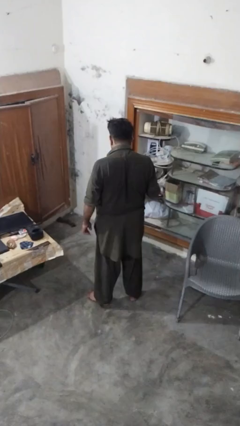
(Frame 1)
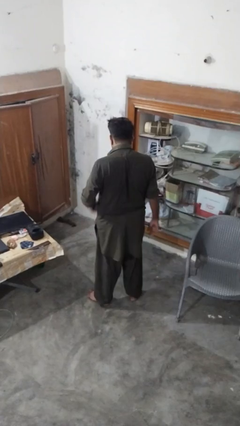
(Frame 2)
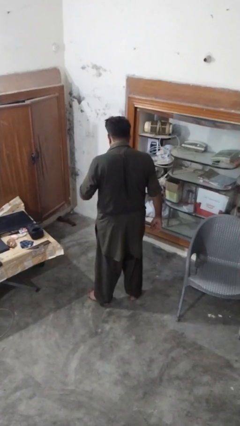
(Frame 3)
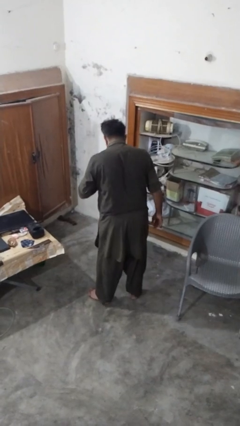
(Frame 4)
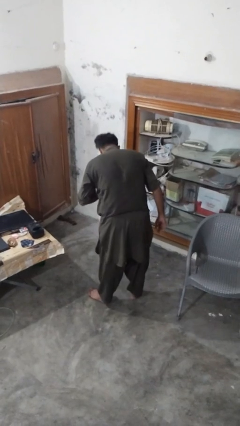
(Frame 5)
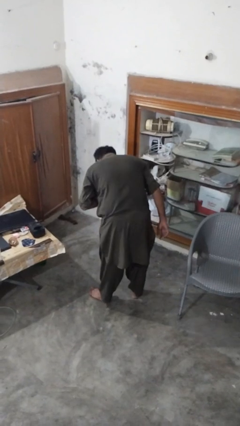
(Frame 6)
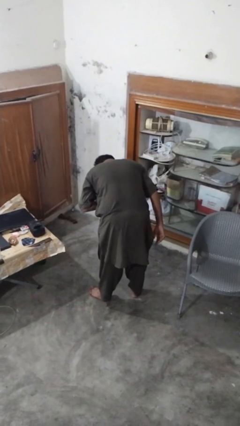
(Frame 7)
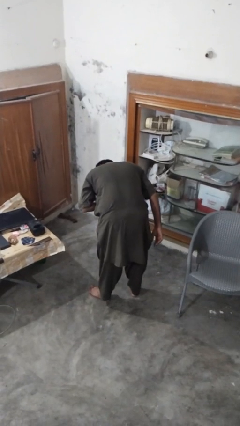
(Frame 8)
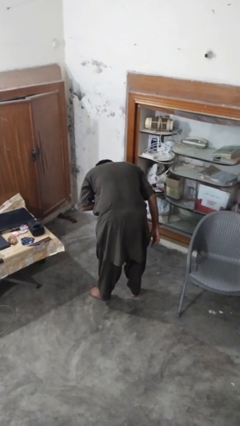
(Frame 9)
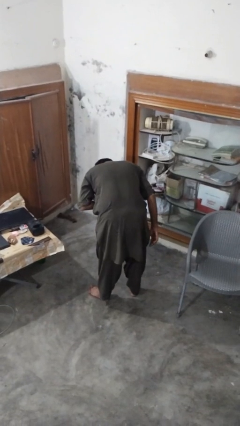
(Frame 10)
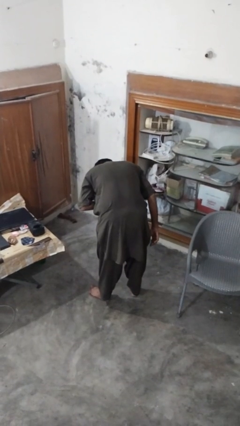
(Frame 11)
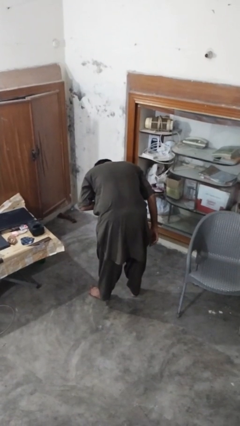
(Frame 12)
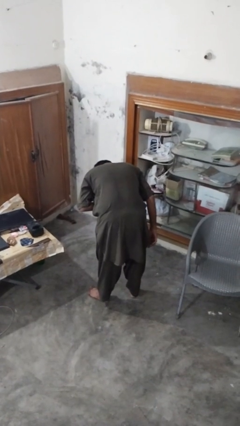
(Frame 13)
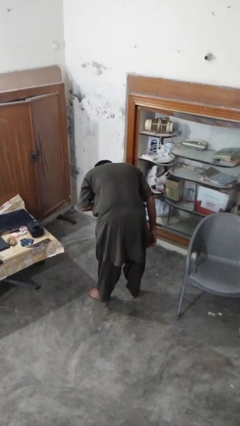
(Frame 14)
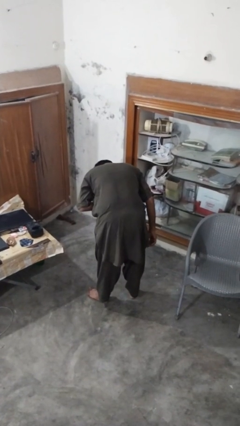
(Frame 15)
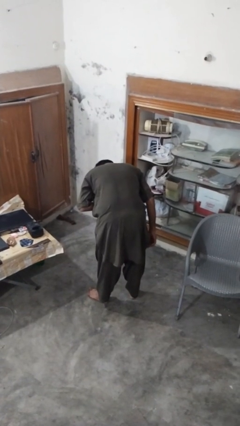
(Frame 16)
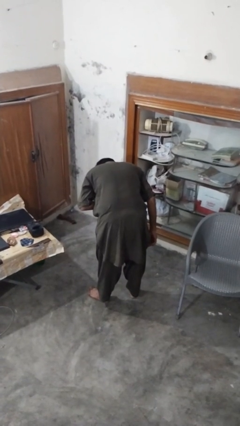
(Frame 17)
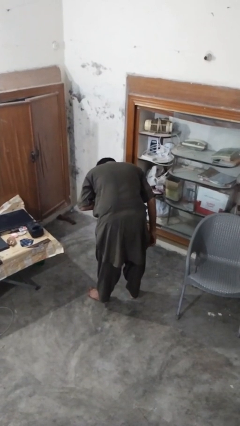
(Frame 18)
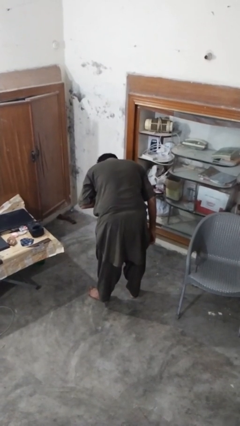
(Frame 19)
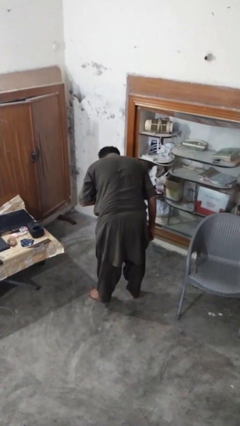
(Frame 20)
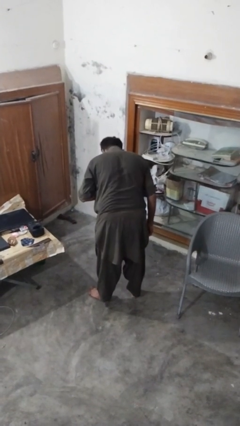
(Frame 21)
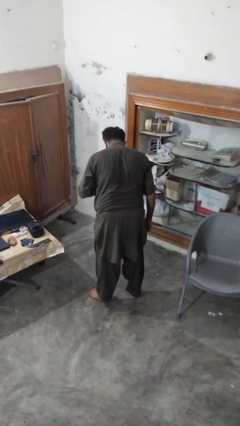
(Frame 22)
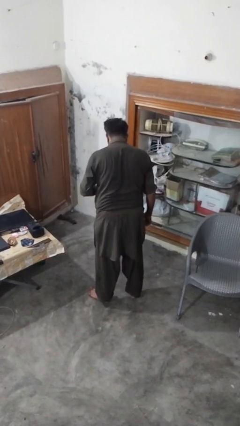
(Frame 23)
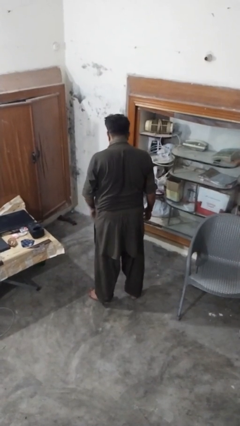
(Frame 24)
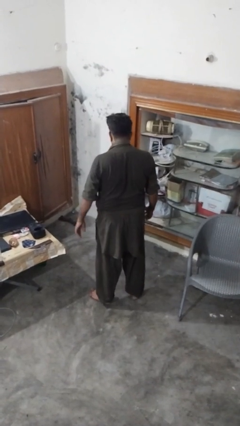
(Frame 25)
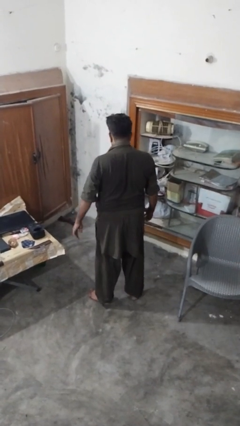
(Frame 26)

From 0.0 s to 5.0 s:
person bows

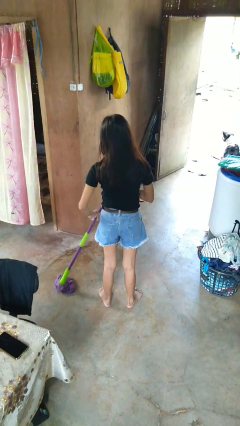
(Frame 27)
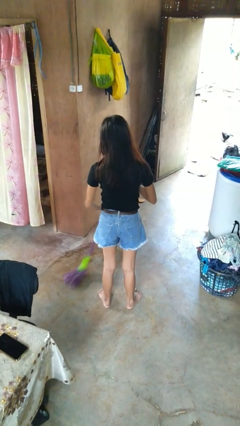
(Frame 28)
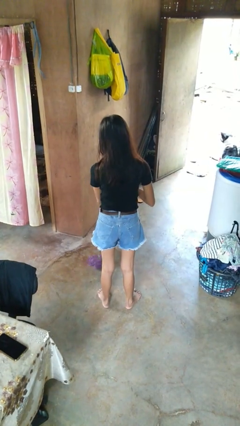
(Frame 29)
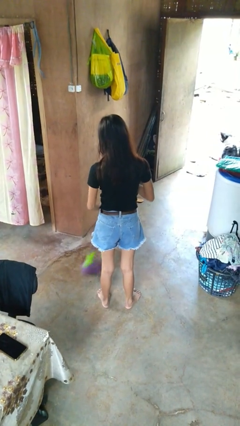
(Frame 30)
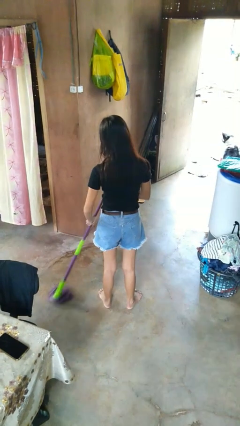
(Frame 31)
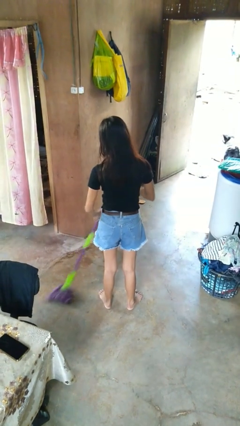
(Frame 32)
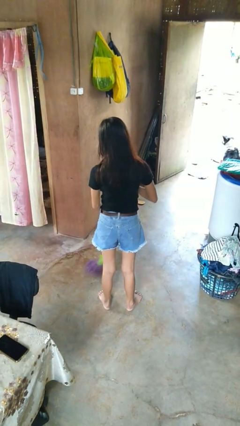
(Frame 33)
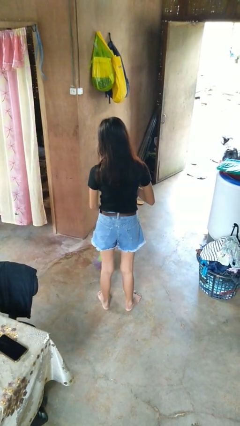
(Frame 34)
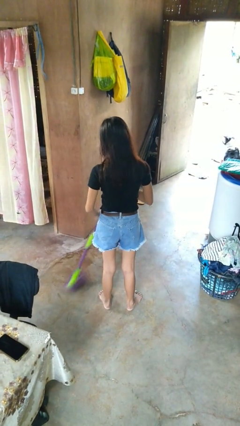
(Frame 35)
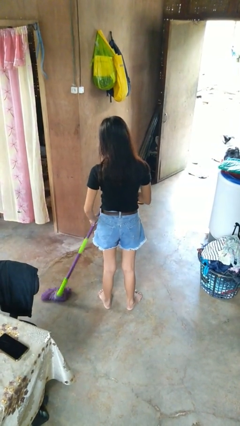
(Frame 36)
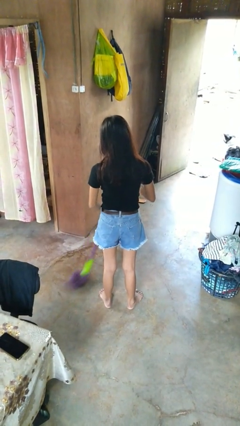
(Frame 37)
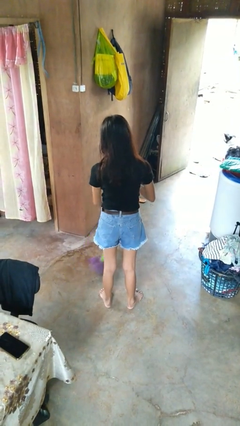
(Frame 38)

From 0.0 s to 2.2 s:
person mops

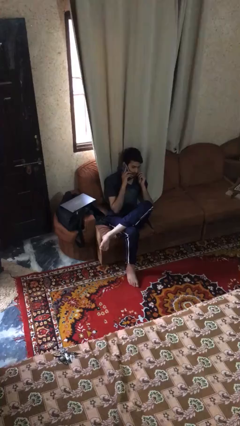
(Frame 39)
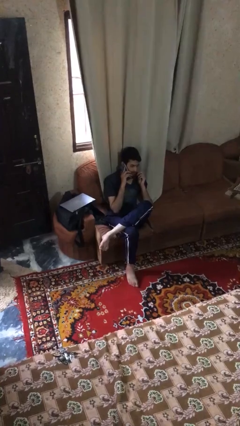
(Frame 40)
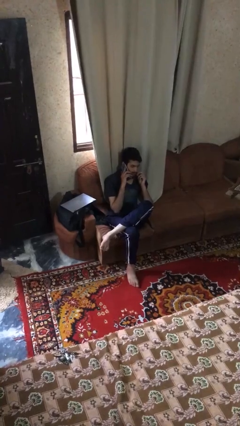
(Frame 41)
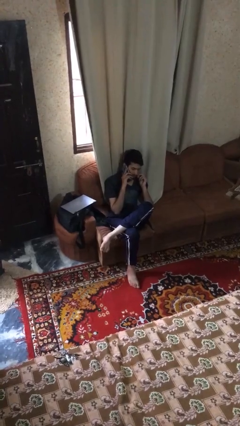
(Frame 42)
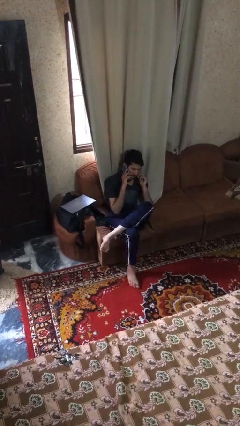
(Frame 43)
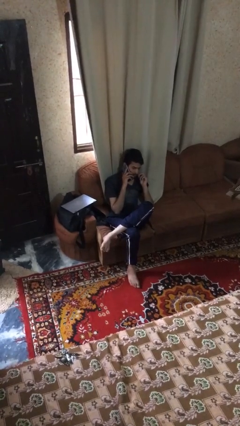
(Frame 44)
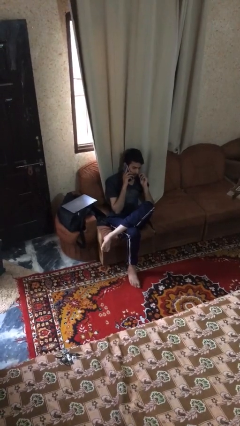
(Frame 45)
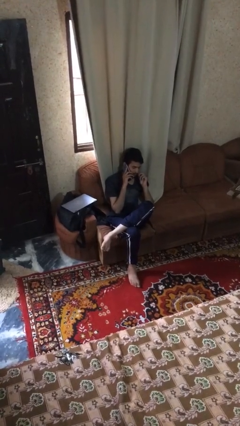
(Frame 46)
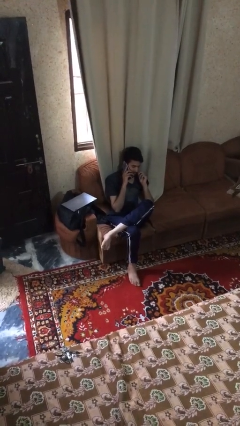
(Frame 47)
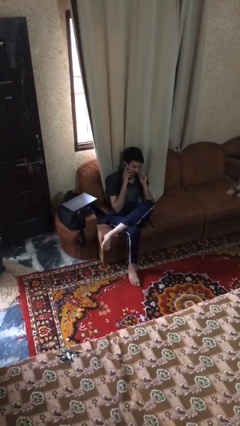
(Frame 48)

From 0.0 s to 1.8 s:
person talks on phone

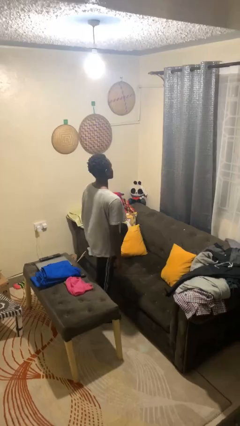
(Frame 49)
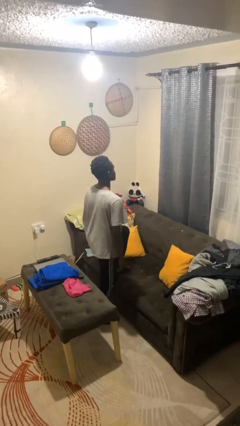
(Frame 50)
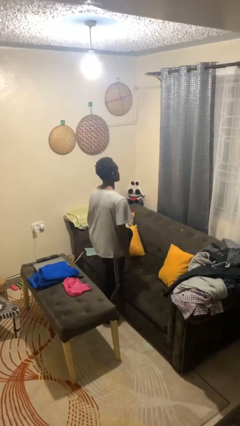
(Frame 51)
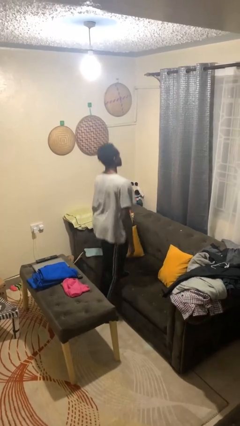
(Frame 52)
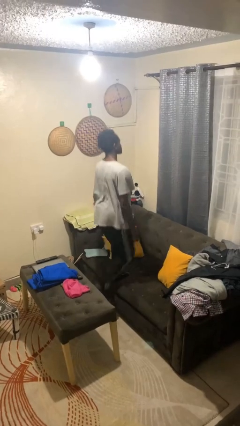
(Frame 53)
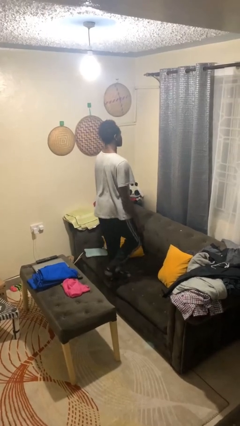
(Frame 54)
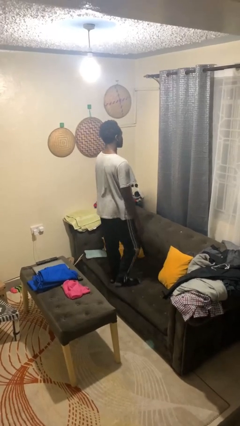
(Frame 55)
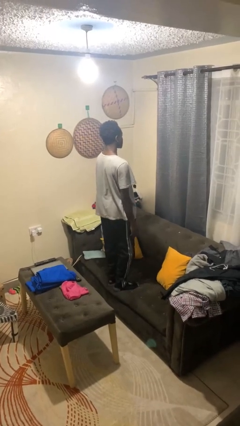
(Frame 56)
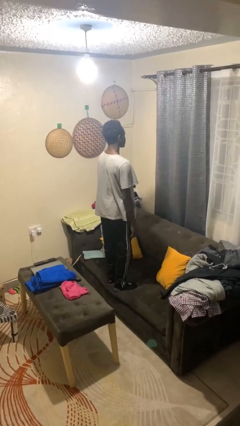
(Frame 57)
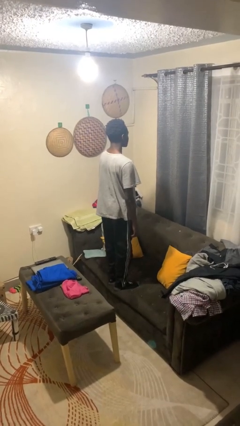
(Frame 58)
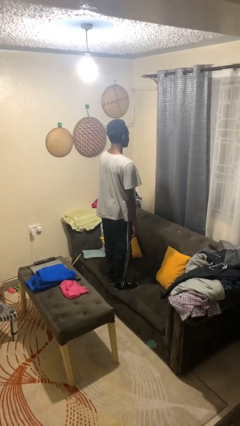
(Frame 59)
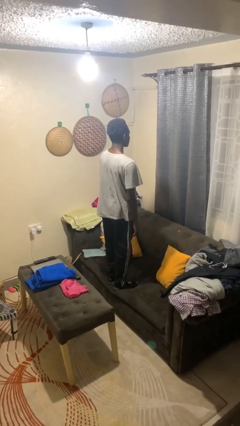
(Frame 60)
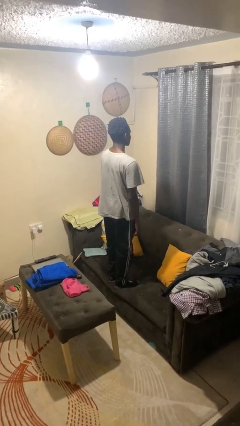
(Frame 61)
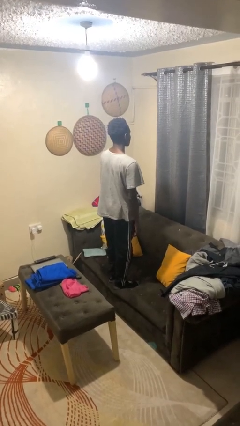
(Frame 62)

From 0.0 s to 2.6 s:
person jumps on couch

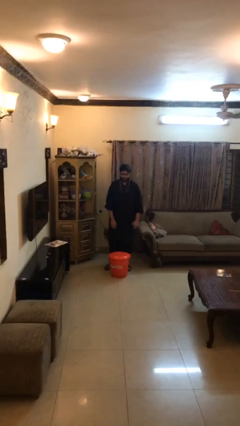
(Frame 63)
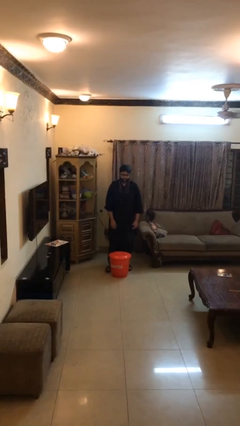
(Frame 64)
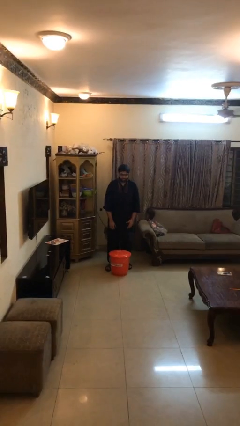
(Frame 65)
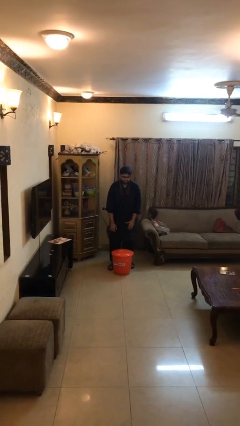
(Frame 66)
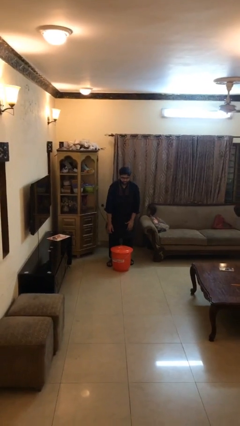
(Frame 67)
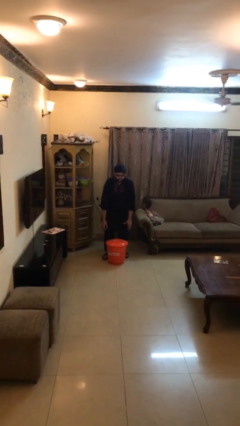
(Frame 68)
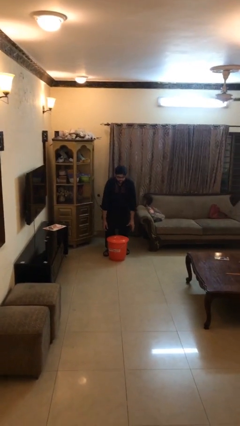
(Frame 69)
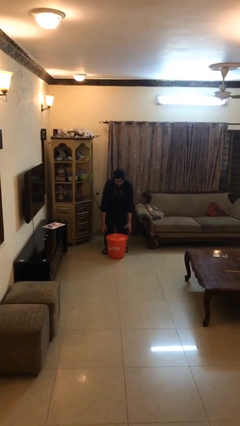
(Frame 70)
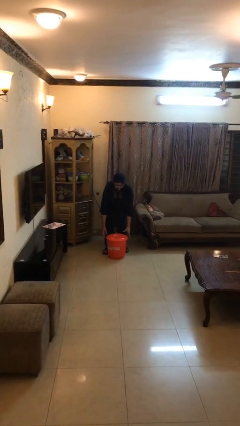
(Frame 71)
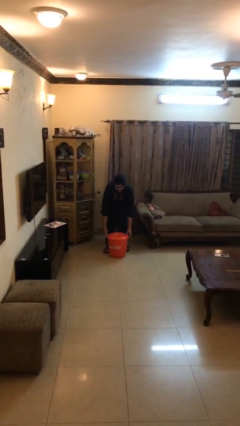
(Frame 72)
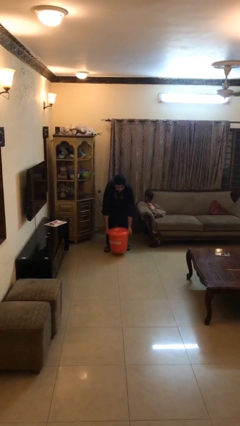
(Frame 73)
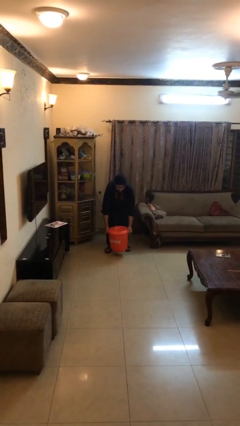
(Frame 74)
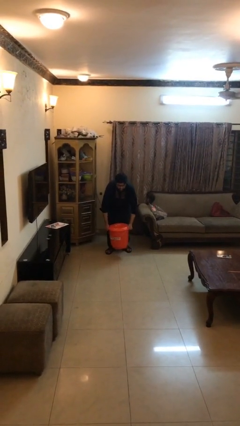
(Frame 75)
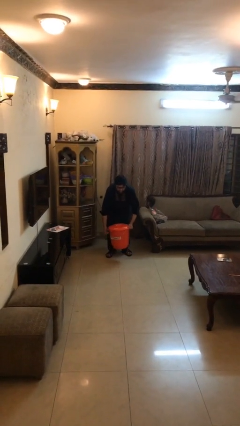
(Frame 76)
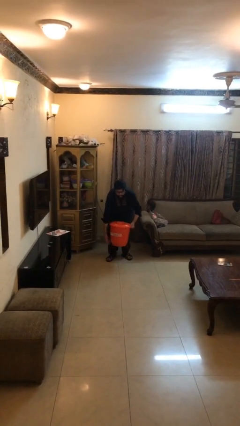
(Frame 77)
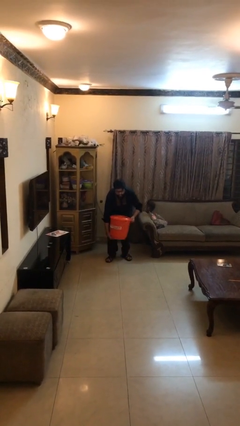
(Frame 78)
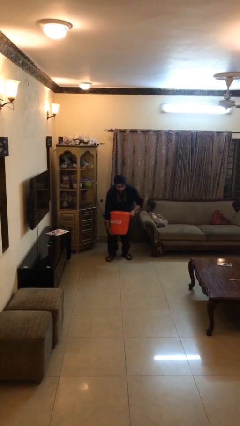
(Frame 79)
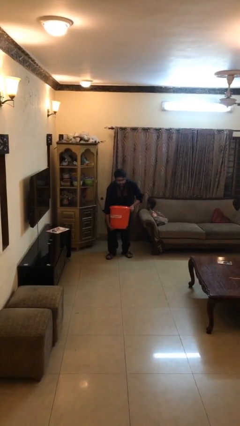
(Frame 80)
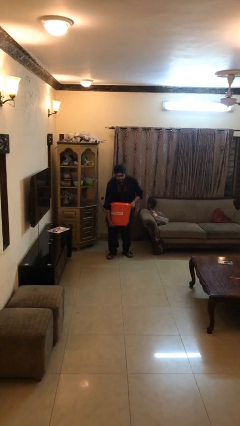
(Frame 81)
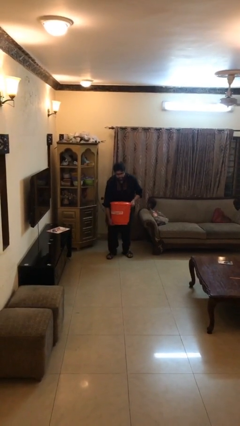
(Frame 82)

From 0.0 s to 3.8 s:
person picks up object from floor

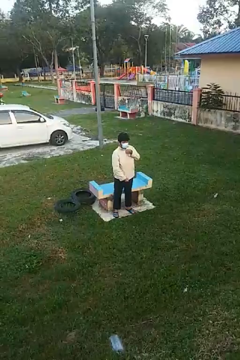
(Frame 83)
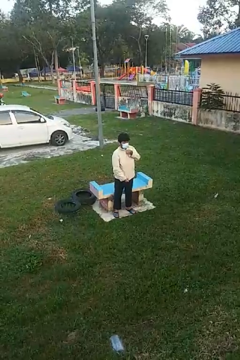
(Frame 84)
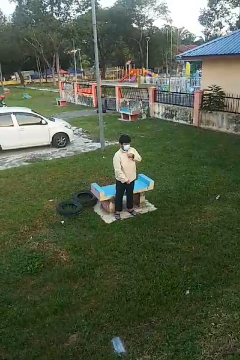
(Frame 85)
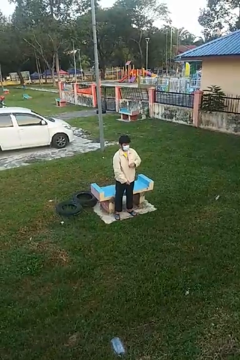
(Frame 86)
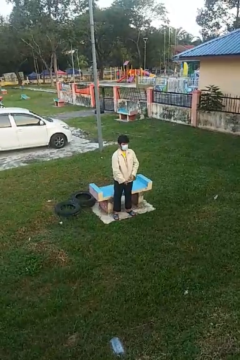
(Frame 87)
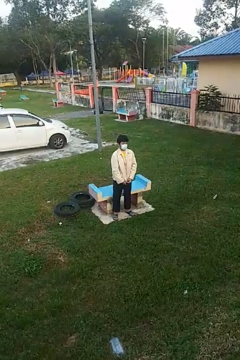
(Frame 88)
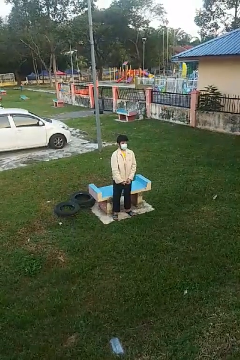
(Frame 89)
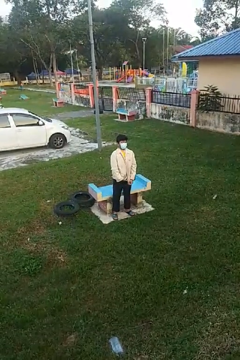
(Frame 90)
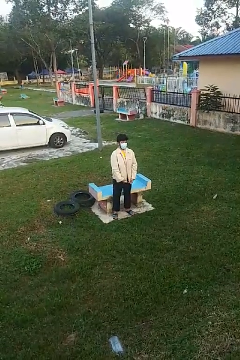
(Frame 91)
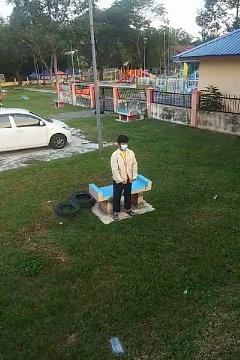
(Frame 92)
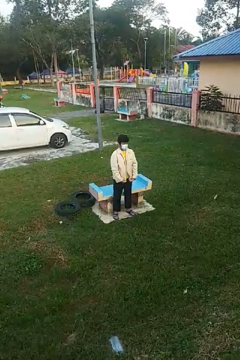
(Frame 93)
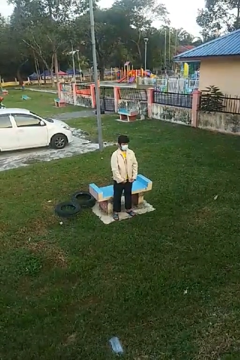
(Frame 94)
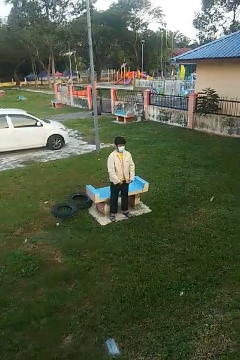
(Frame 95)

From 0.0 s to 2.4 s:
person unzips jacket

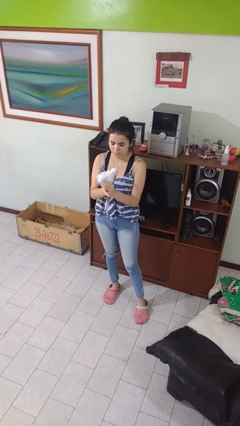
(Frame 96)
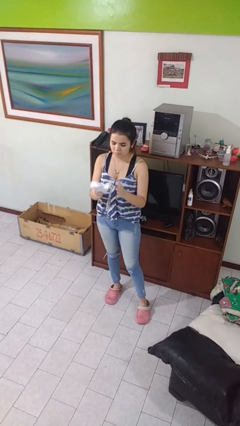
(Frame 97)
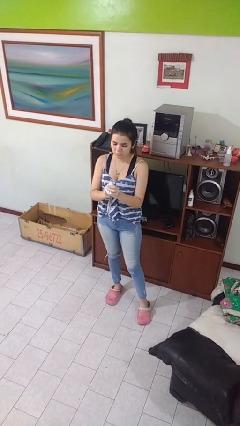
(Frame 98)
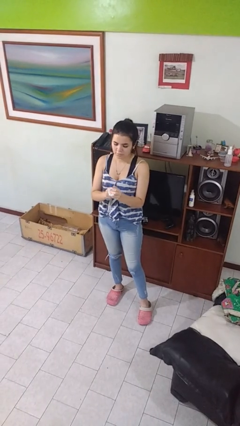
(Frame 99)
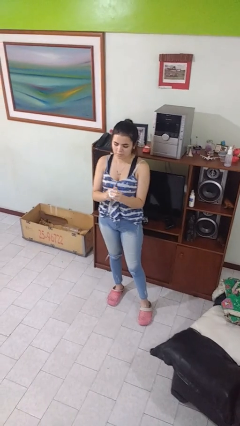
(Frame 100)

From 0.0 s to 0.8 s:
person crumples paper
